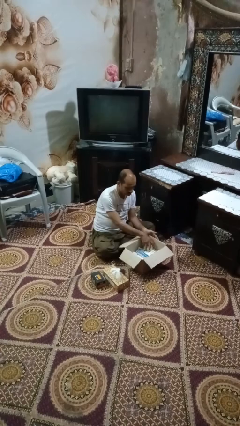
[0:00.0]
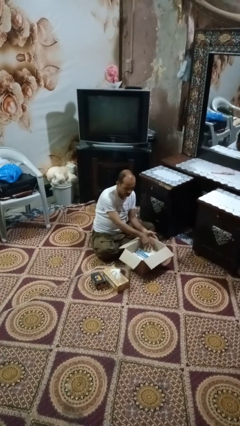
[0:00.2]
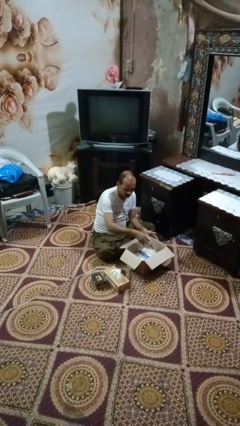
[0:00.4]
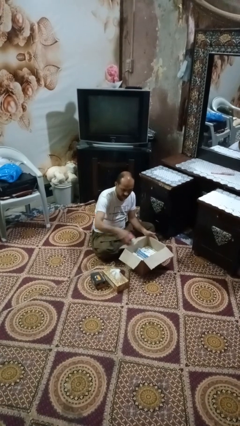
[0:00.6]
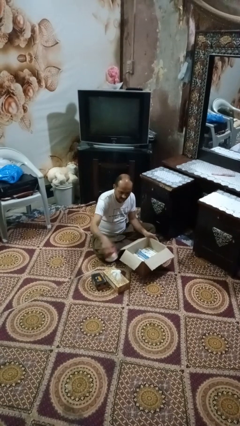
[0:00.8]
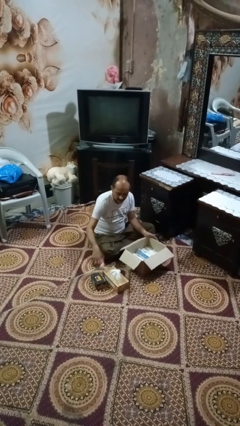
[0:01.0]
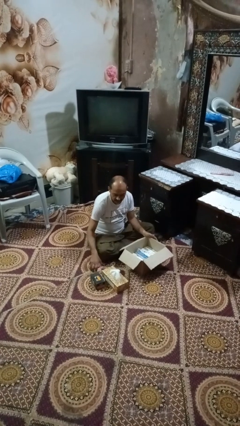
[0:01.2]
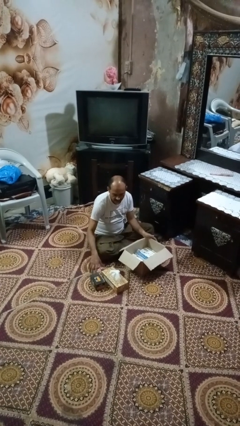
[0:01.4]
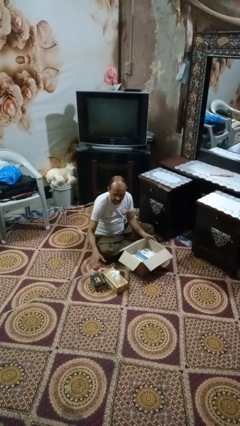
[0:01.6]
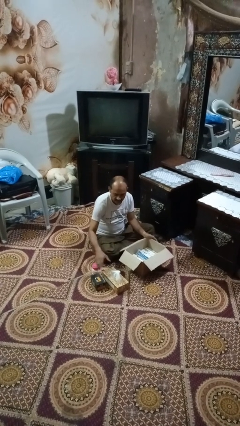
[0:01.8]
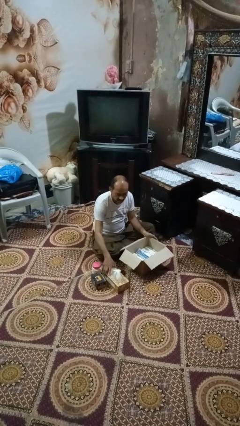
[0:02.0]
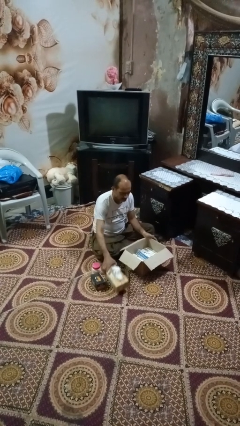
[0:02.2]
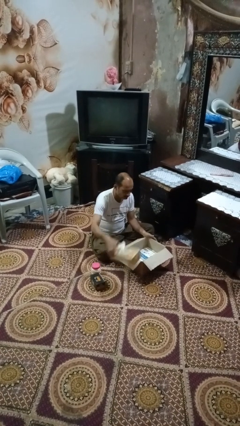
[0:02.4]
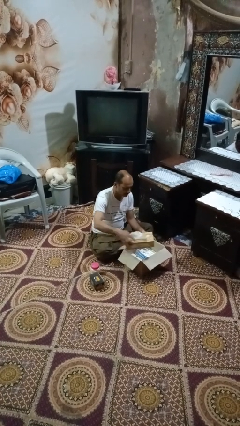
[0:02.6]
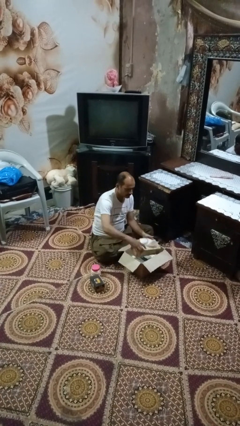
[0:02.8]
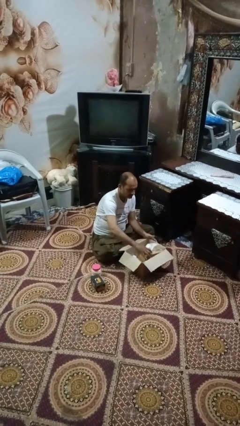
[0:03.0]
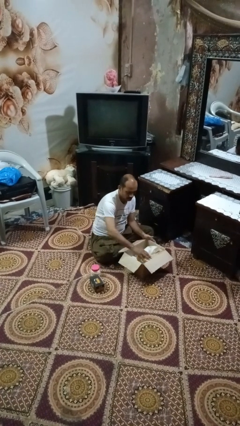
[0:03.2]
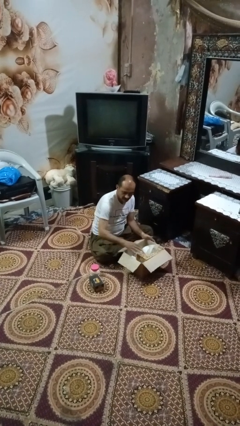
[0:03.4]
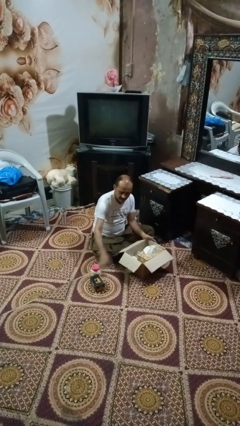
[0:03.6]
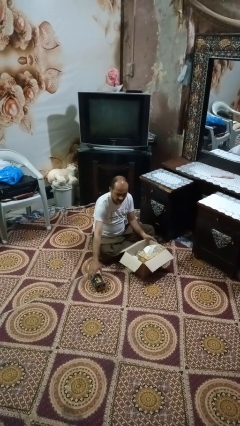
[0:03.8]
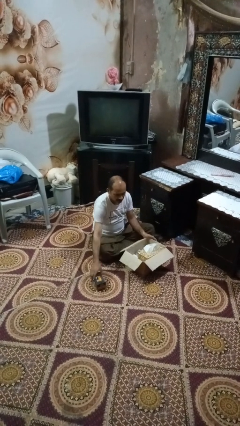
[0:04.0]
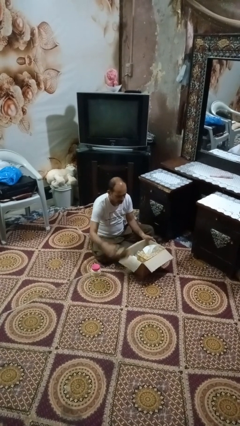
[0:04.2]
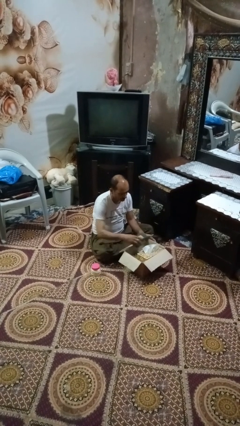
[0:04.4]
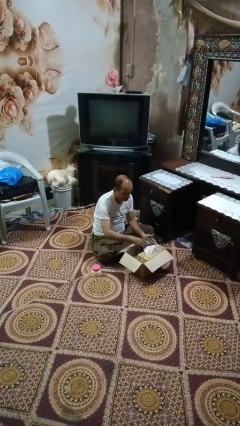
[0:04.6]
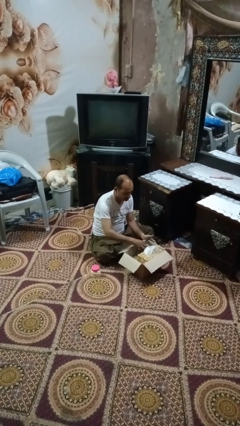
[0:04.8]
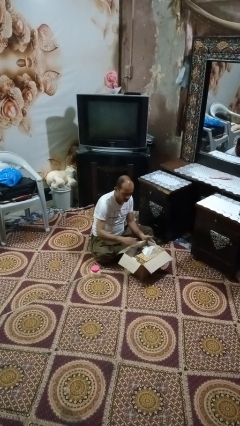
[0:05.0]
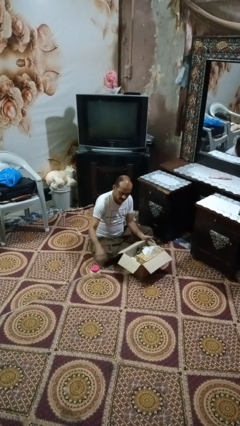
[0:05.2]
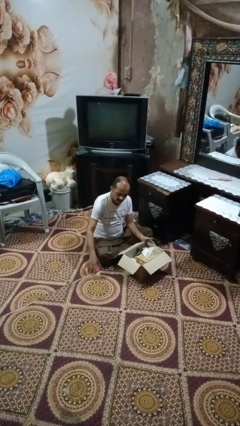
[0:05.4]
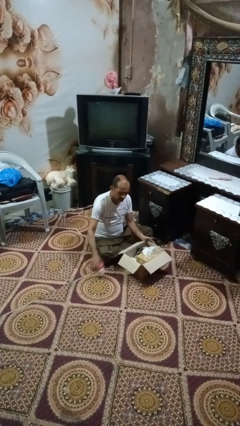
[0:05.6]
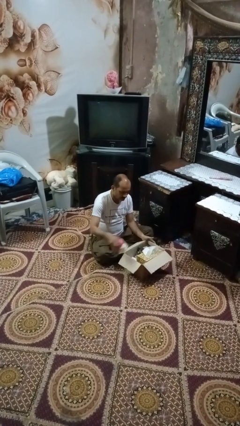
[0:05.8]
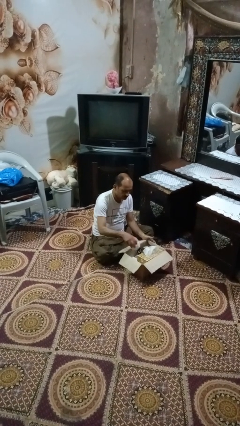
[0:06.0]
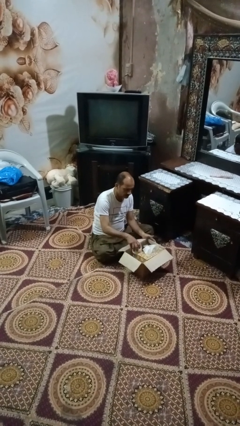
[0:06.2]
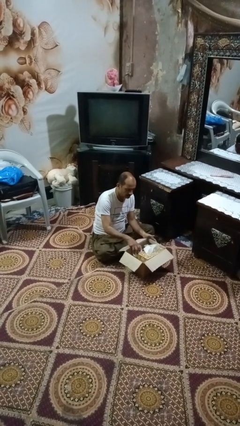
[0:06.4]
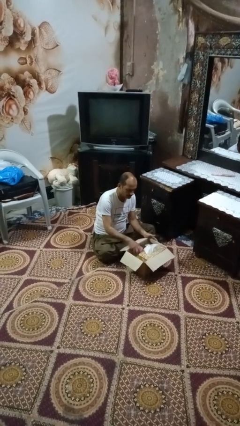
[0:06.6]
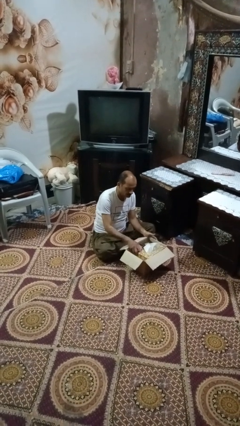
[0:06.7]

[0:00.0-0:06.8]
person puts object into box

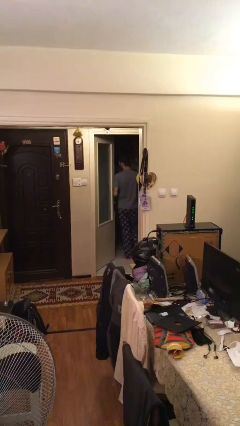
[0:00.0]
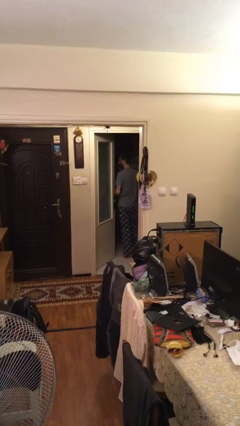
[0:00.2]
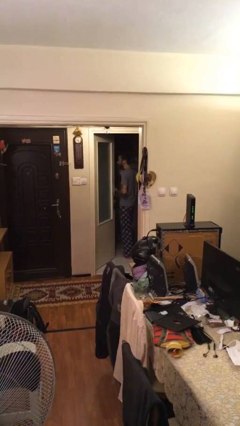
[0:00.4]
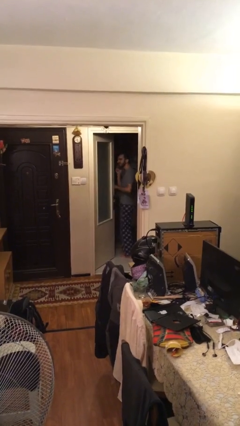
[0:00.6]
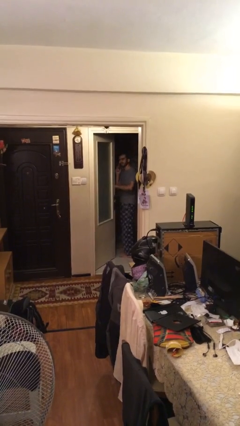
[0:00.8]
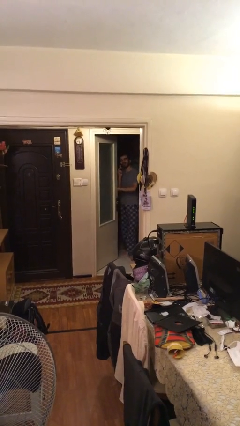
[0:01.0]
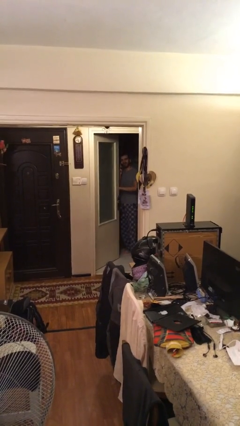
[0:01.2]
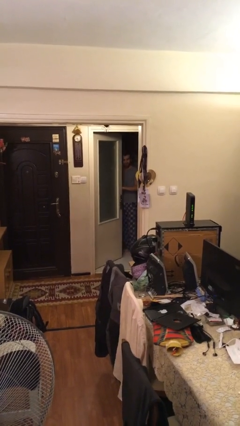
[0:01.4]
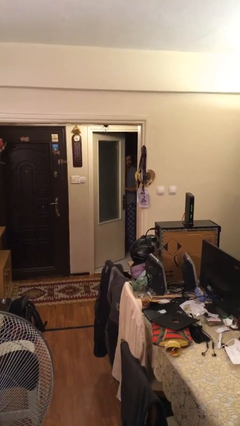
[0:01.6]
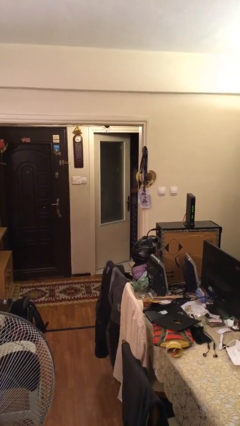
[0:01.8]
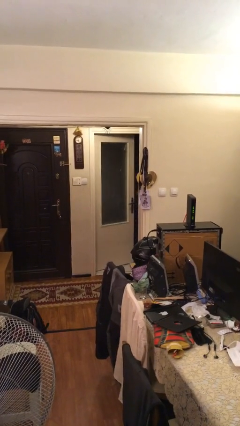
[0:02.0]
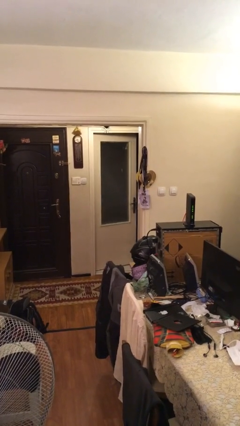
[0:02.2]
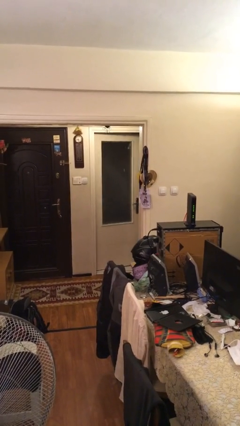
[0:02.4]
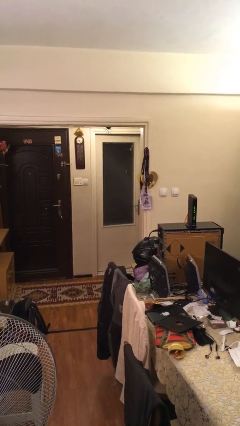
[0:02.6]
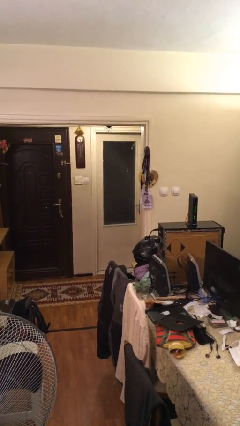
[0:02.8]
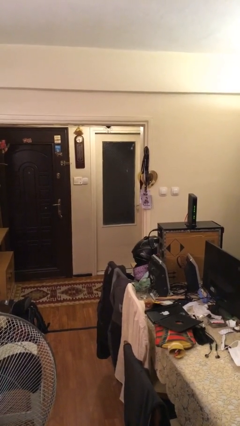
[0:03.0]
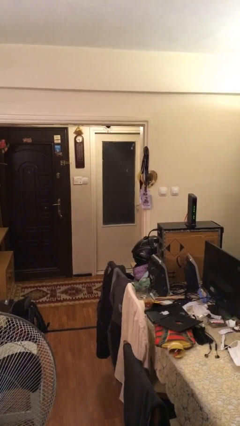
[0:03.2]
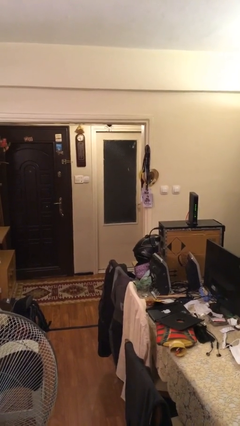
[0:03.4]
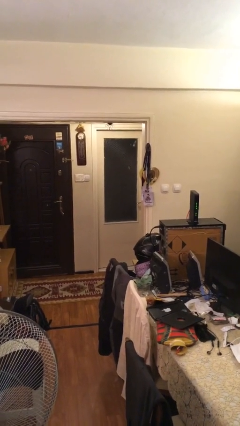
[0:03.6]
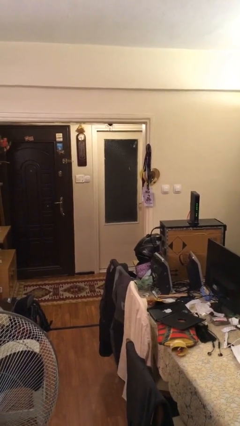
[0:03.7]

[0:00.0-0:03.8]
person closes facility door

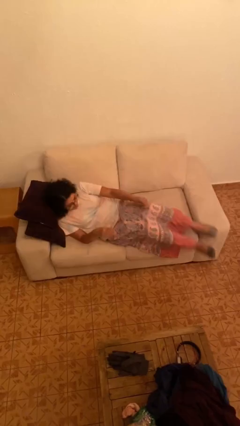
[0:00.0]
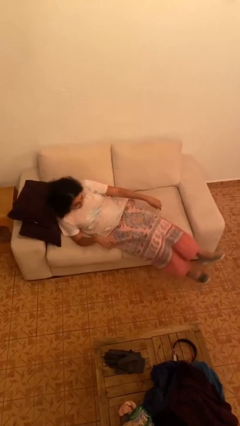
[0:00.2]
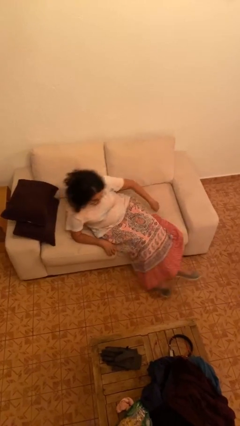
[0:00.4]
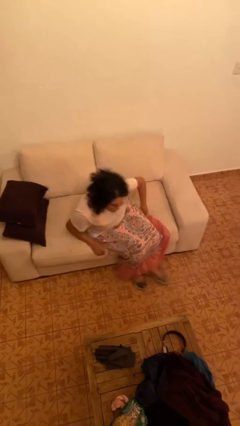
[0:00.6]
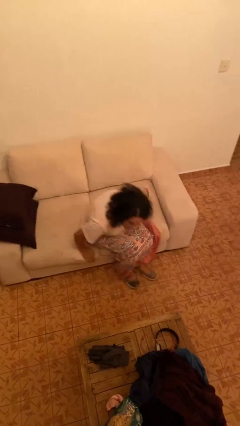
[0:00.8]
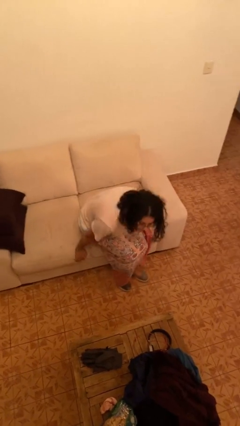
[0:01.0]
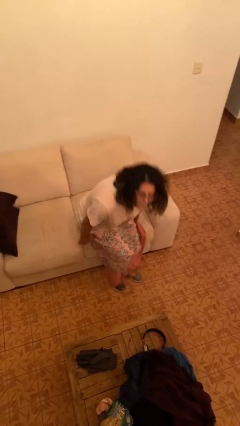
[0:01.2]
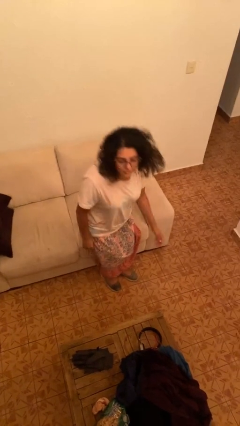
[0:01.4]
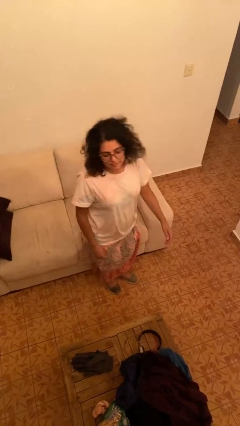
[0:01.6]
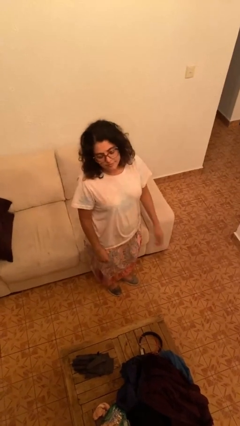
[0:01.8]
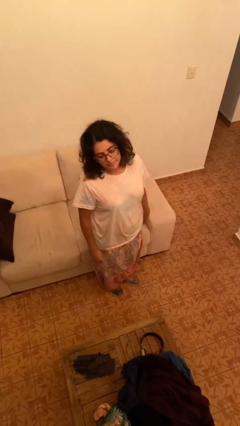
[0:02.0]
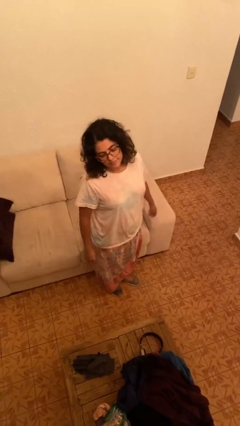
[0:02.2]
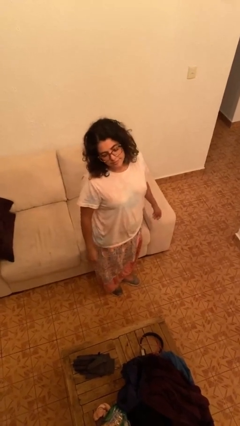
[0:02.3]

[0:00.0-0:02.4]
person stands up

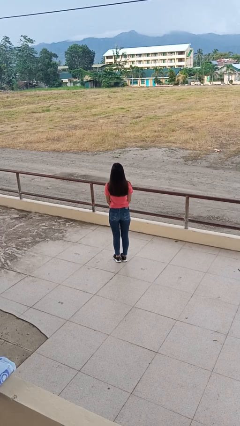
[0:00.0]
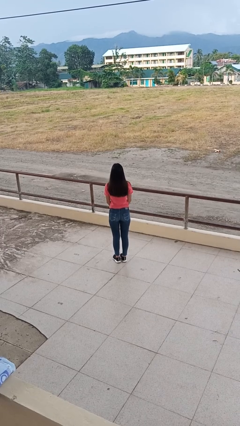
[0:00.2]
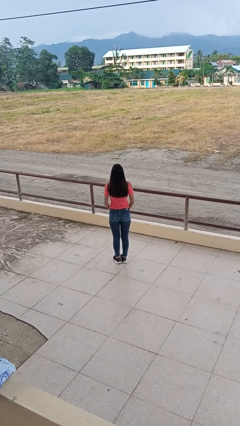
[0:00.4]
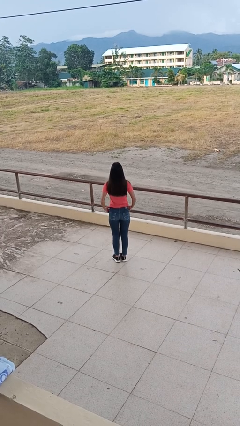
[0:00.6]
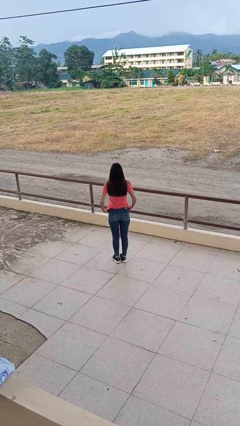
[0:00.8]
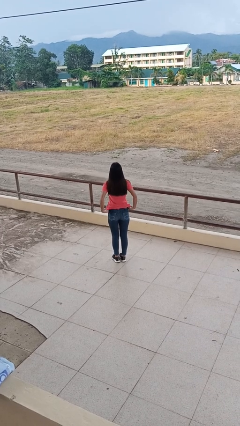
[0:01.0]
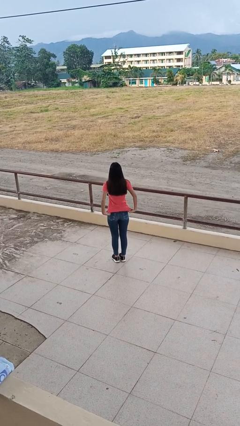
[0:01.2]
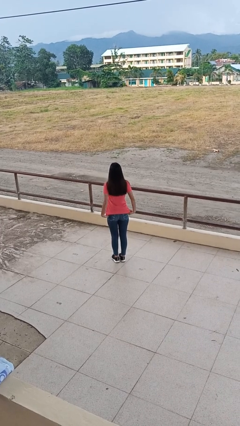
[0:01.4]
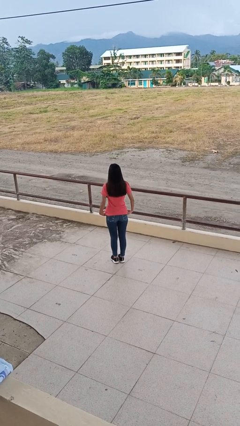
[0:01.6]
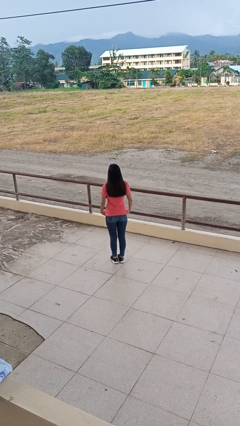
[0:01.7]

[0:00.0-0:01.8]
person untucks shirt

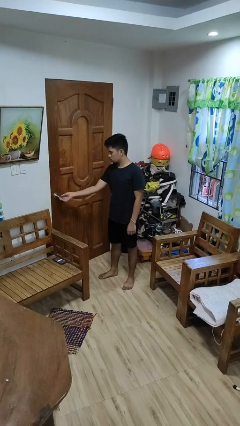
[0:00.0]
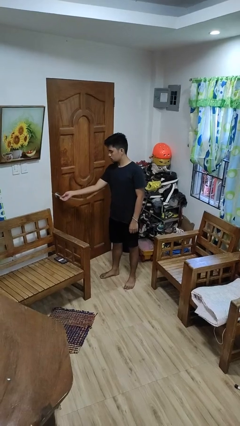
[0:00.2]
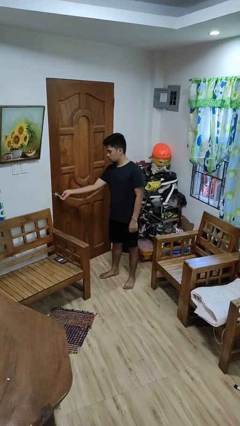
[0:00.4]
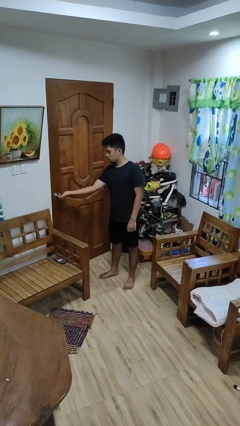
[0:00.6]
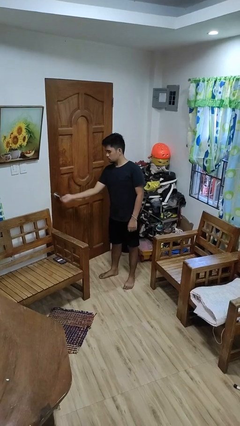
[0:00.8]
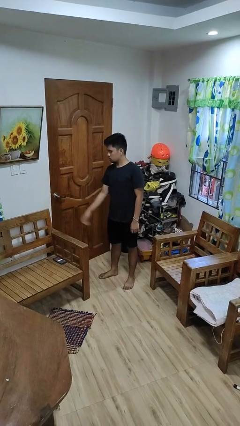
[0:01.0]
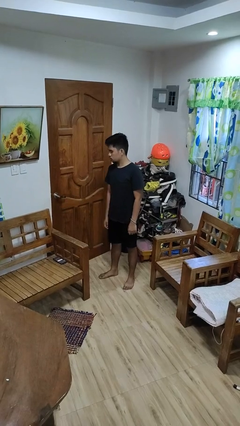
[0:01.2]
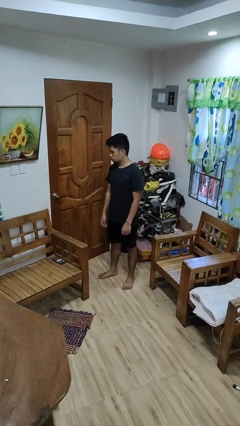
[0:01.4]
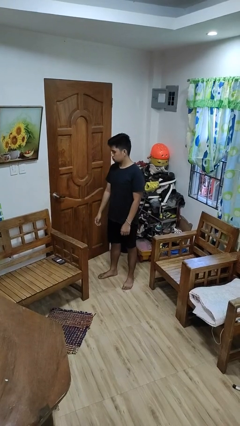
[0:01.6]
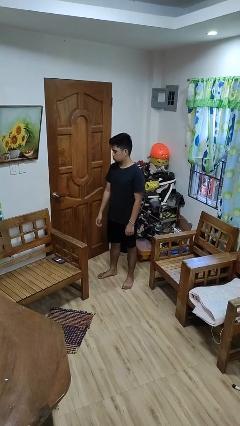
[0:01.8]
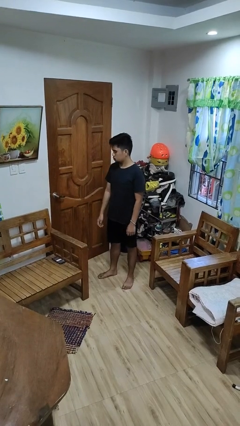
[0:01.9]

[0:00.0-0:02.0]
person unlocks door with keys

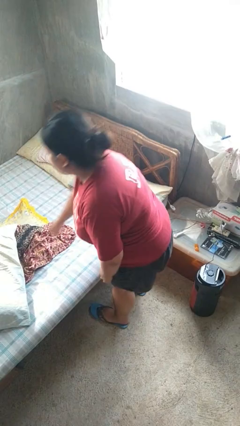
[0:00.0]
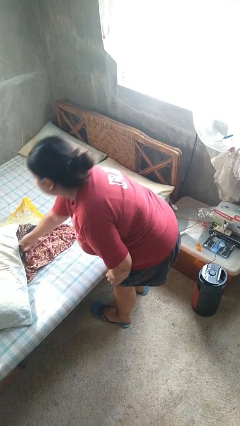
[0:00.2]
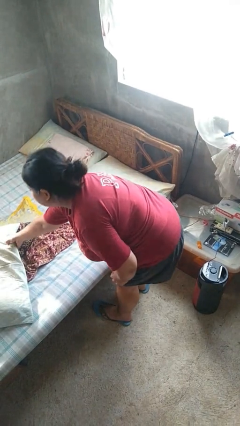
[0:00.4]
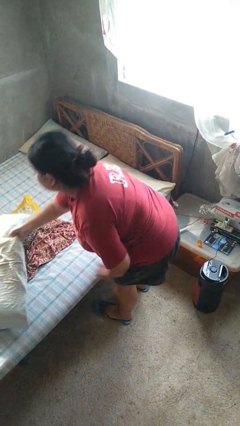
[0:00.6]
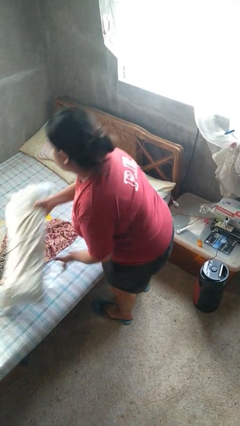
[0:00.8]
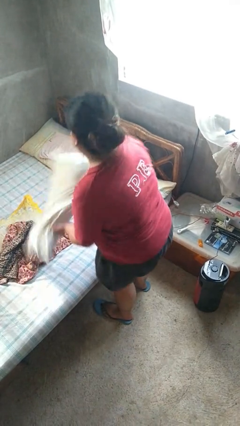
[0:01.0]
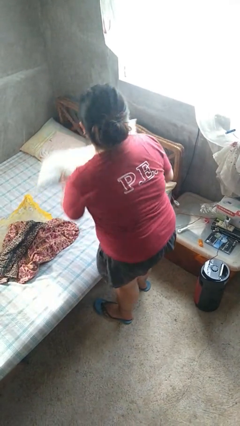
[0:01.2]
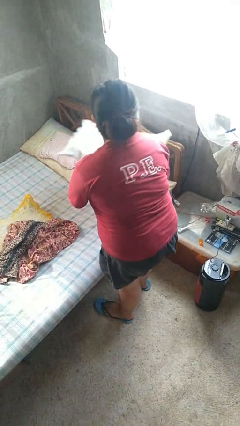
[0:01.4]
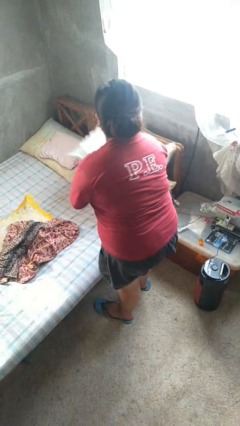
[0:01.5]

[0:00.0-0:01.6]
person makes bed
